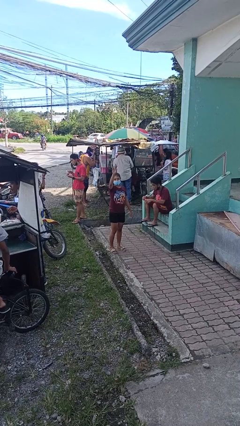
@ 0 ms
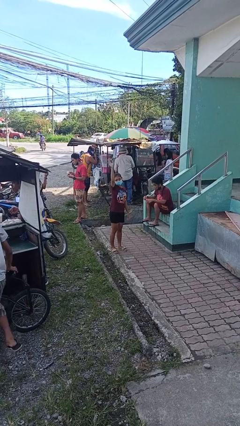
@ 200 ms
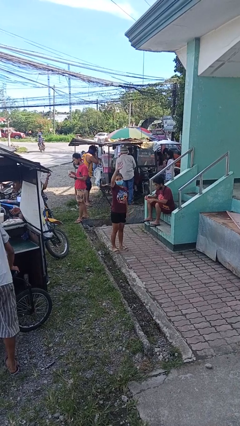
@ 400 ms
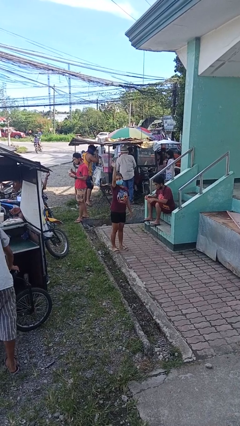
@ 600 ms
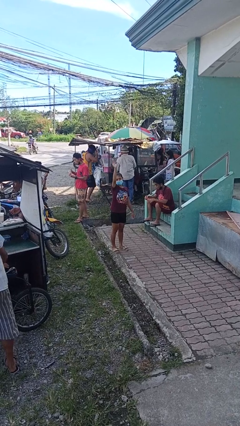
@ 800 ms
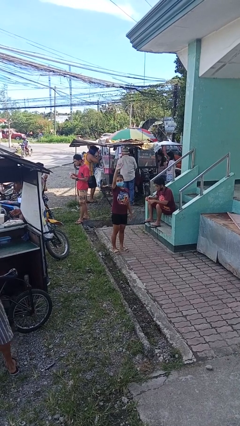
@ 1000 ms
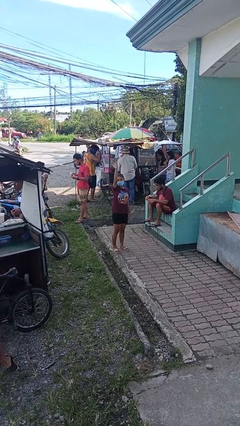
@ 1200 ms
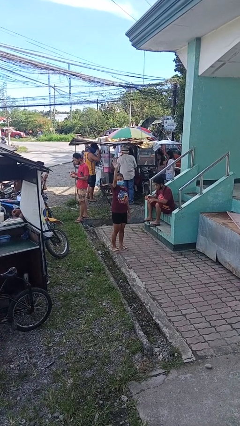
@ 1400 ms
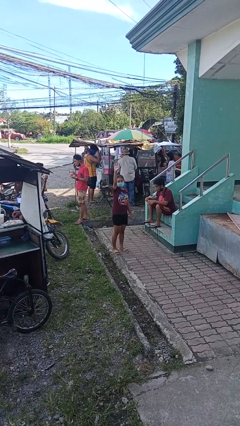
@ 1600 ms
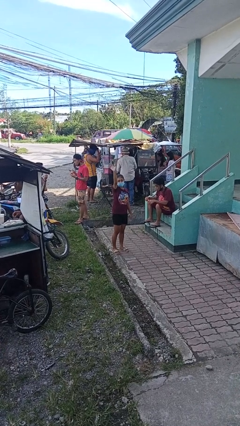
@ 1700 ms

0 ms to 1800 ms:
person waves at person

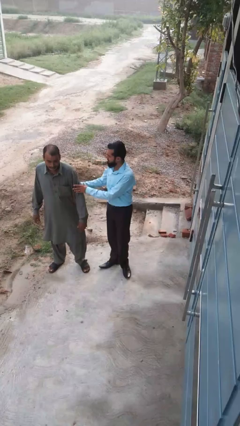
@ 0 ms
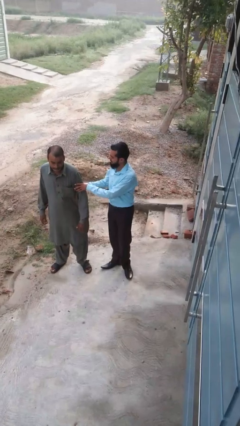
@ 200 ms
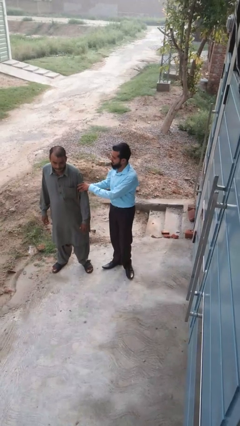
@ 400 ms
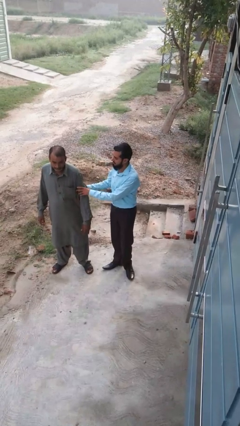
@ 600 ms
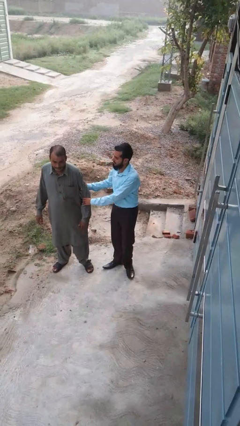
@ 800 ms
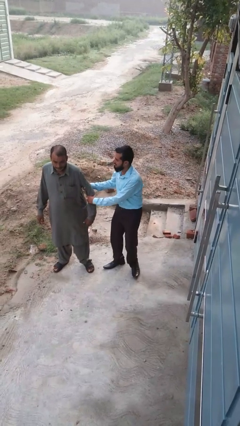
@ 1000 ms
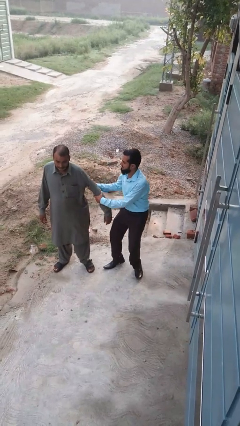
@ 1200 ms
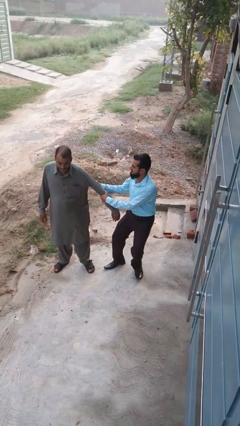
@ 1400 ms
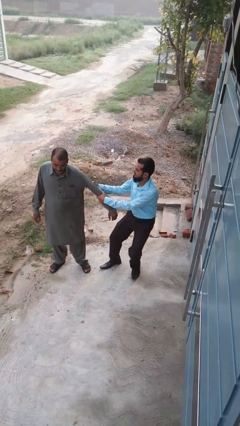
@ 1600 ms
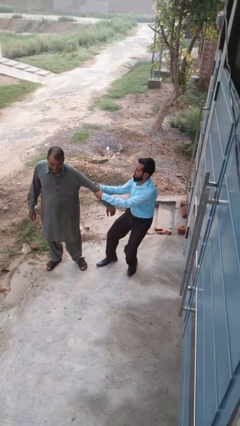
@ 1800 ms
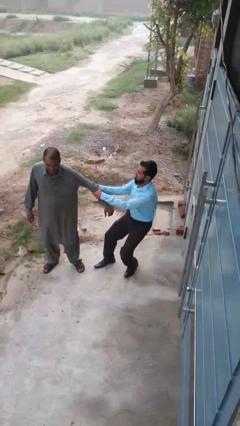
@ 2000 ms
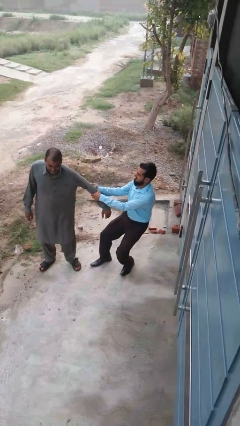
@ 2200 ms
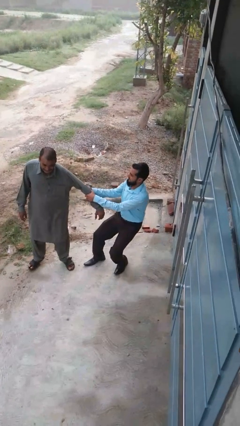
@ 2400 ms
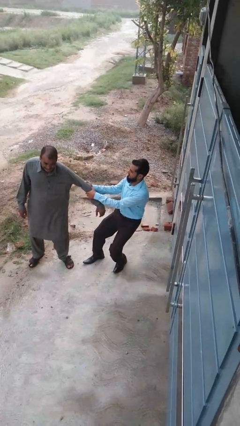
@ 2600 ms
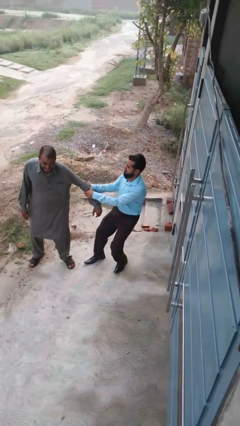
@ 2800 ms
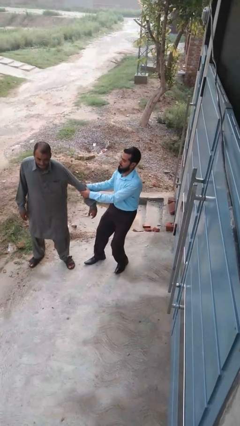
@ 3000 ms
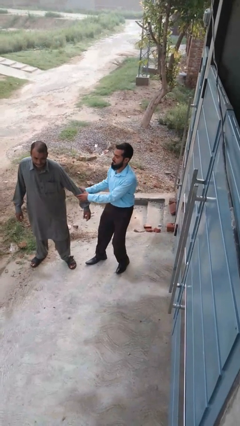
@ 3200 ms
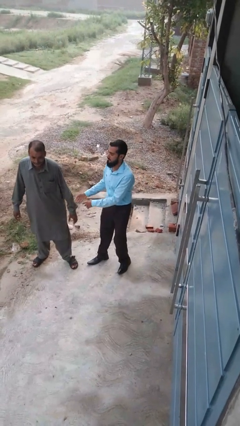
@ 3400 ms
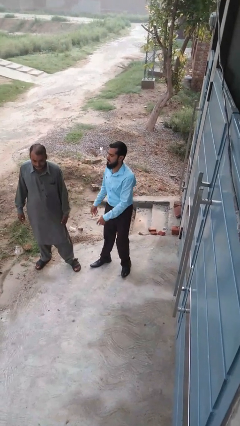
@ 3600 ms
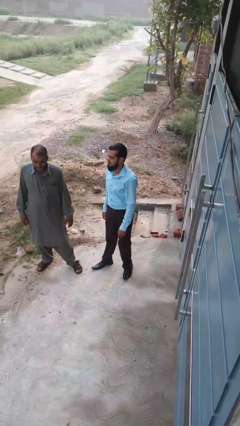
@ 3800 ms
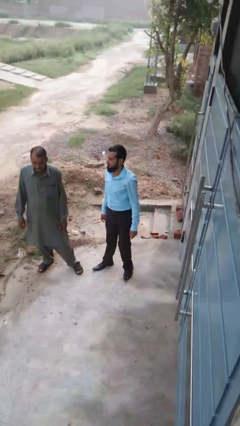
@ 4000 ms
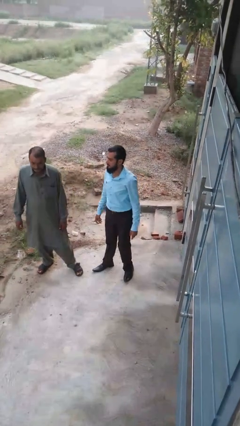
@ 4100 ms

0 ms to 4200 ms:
person grabs person by forearm

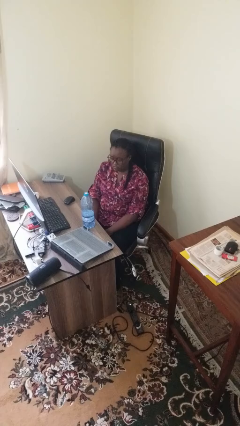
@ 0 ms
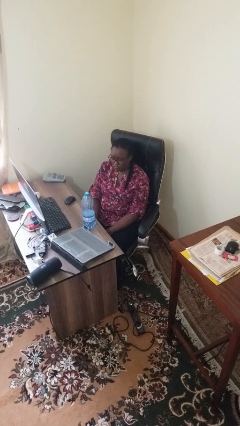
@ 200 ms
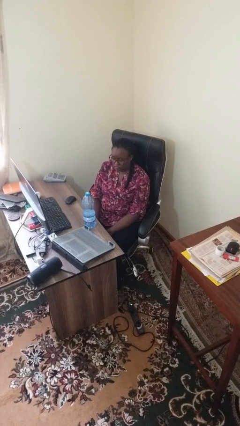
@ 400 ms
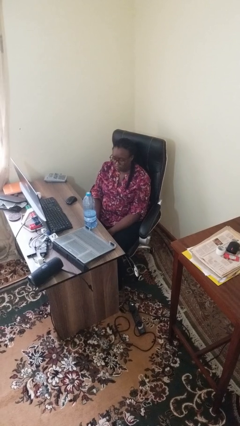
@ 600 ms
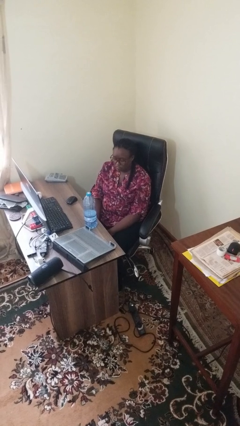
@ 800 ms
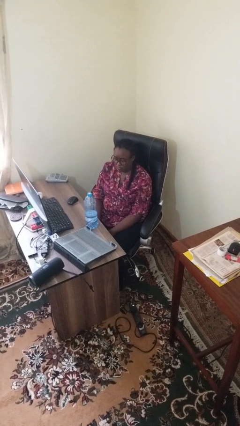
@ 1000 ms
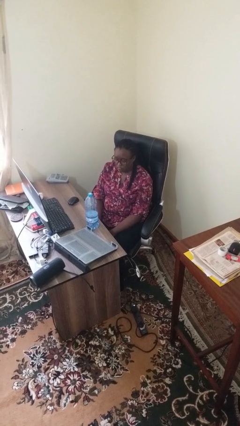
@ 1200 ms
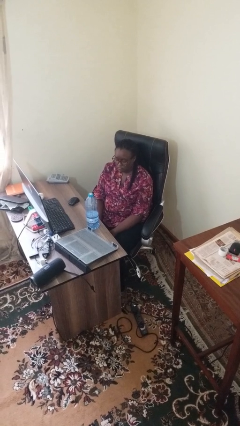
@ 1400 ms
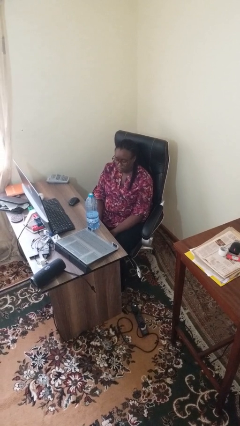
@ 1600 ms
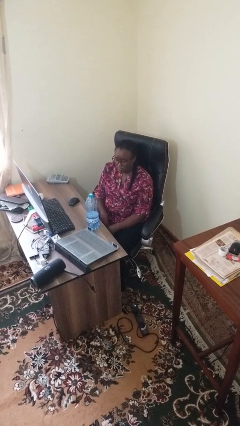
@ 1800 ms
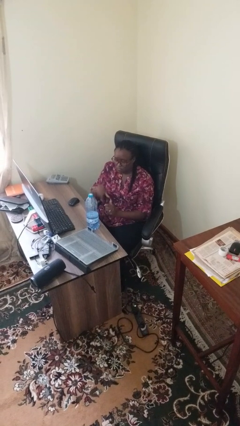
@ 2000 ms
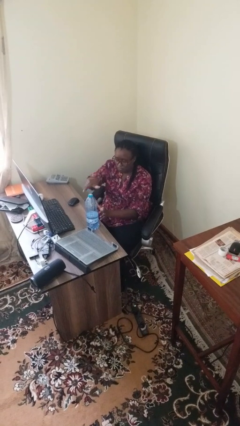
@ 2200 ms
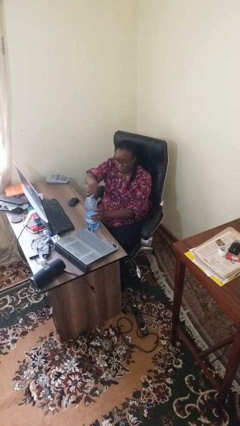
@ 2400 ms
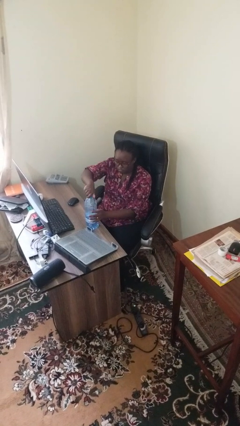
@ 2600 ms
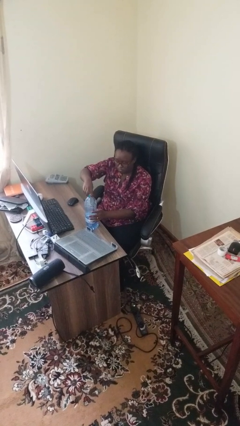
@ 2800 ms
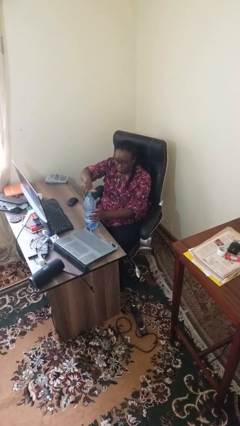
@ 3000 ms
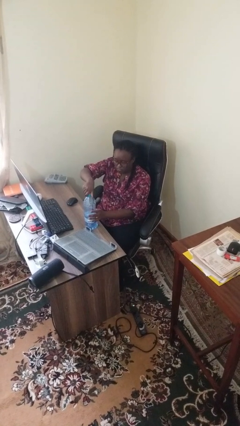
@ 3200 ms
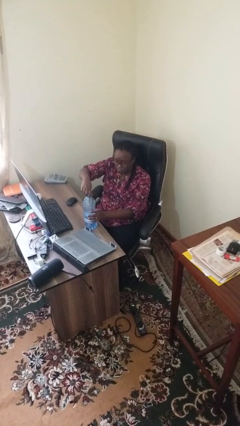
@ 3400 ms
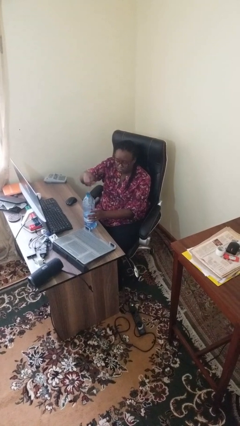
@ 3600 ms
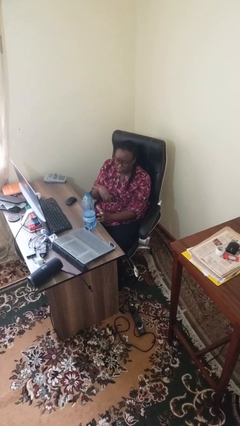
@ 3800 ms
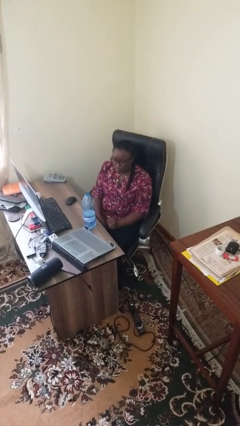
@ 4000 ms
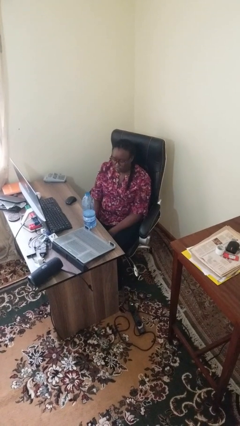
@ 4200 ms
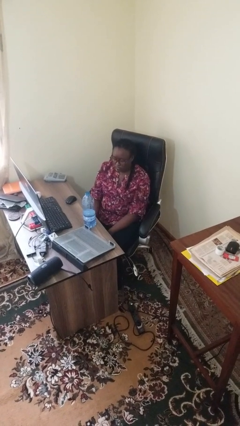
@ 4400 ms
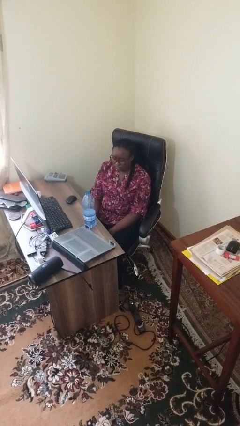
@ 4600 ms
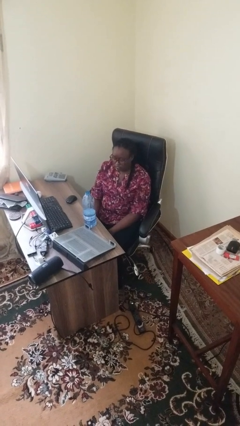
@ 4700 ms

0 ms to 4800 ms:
person unscrews lid from bottle

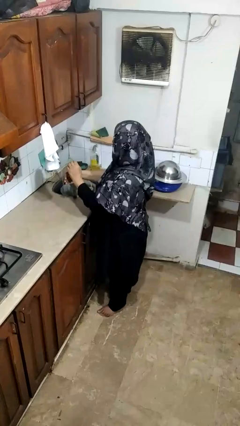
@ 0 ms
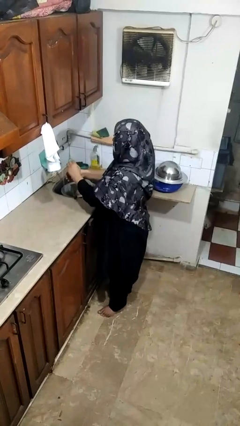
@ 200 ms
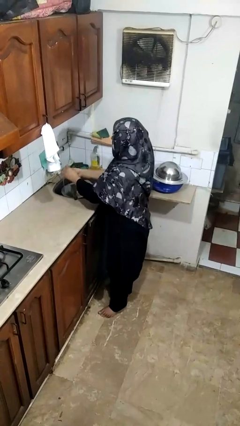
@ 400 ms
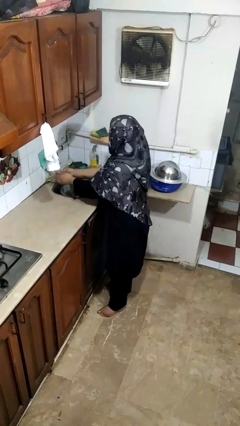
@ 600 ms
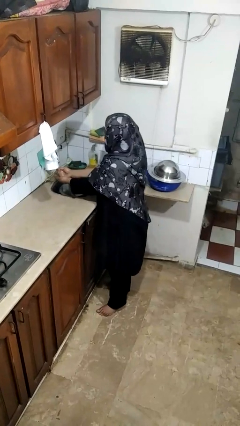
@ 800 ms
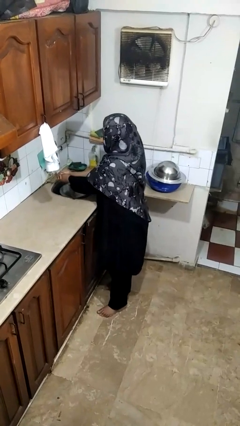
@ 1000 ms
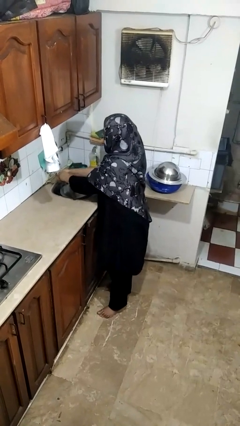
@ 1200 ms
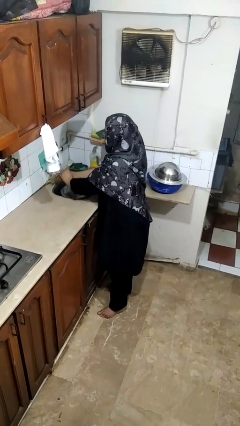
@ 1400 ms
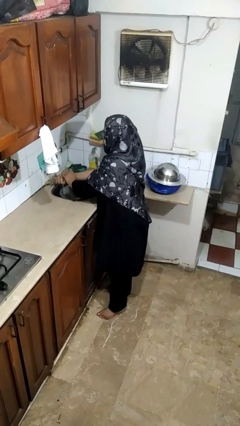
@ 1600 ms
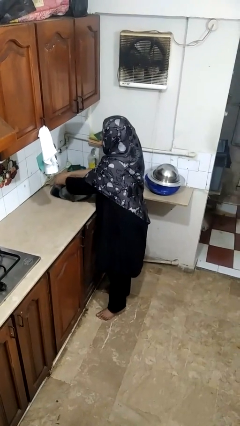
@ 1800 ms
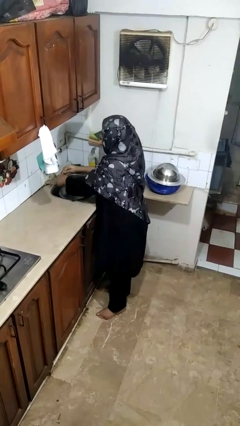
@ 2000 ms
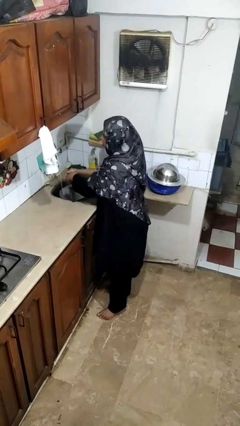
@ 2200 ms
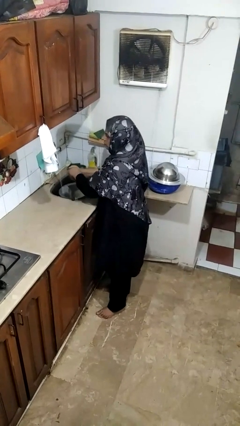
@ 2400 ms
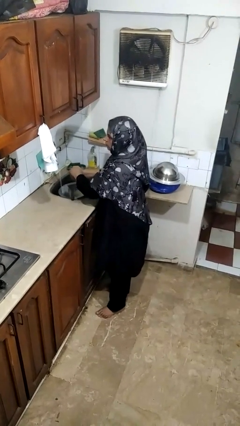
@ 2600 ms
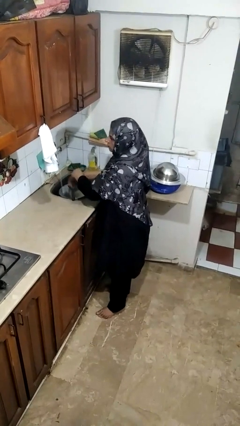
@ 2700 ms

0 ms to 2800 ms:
person washes hands

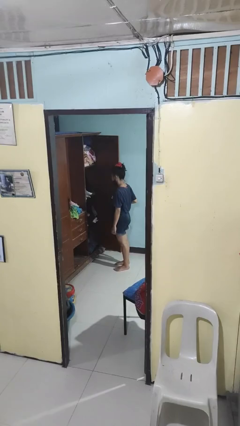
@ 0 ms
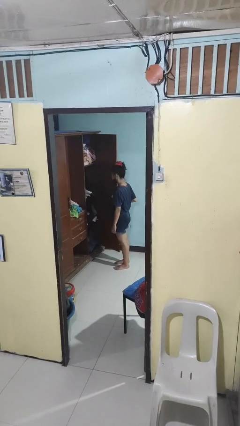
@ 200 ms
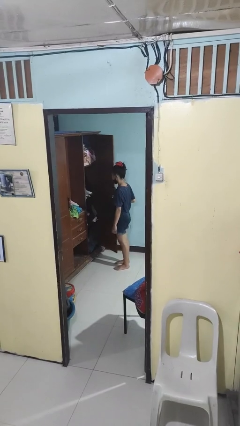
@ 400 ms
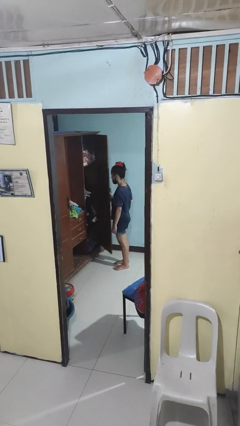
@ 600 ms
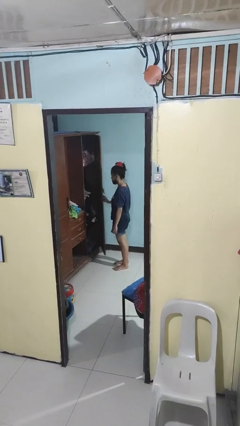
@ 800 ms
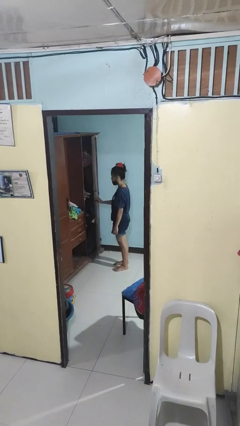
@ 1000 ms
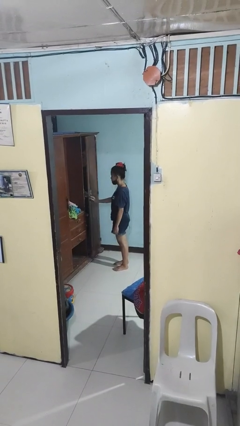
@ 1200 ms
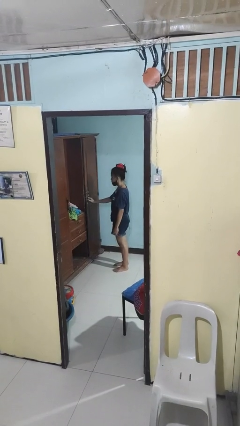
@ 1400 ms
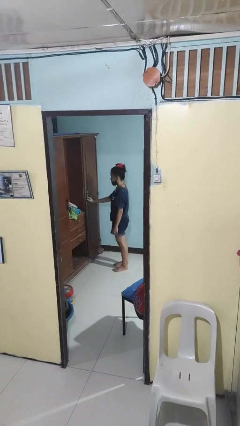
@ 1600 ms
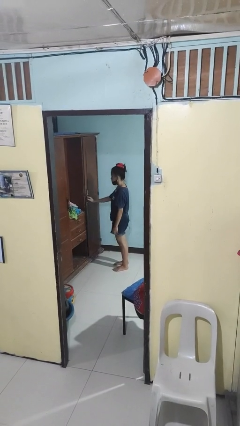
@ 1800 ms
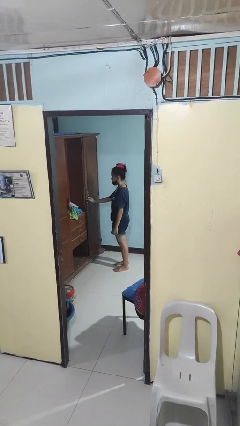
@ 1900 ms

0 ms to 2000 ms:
person closes closet door

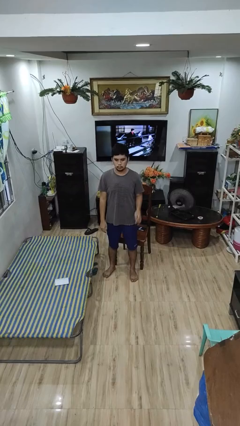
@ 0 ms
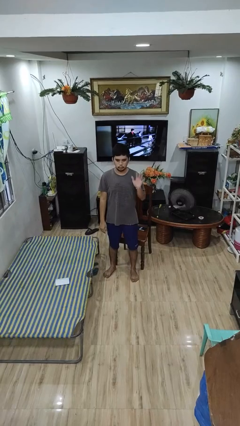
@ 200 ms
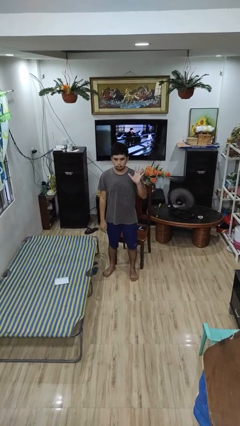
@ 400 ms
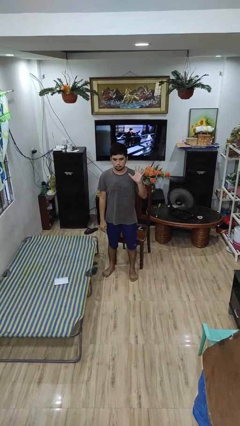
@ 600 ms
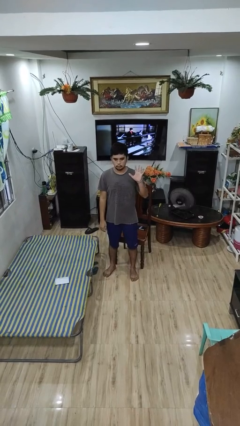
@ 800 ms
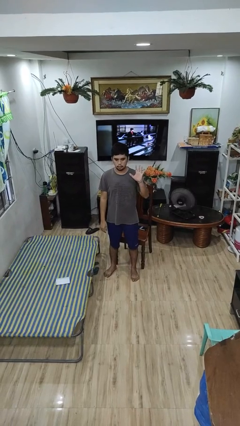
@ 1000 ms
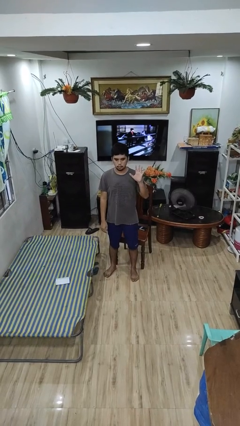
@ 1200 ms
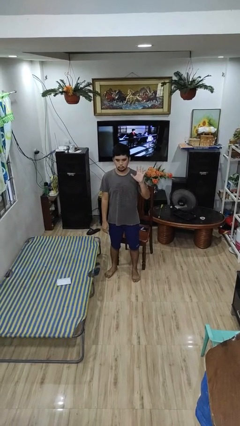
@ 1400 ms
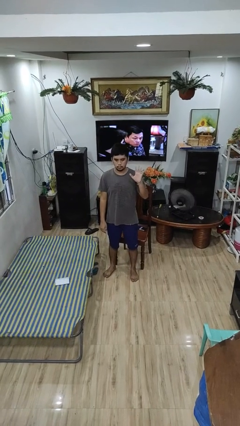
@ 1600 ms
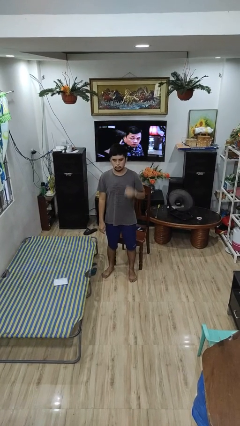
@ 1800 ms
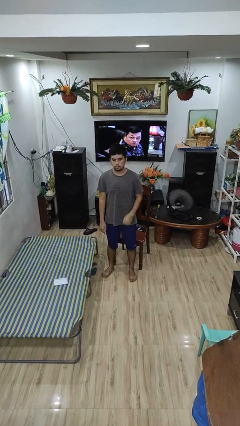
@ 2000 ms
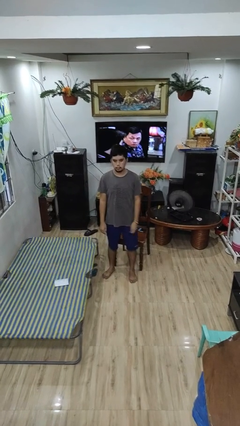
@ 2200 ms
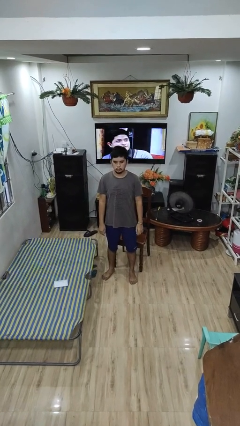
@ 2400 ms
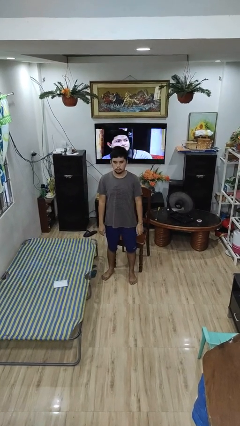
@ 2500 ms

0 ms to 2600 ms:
person gestures number five
